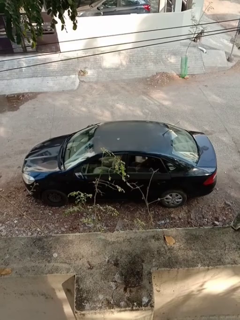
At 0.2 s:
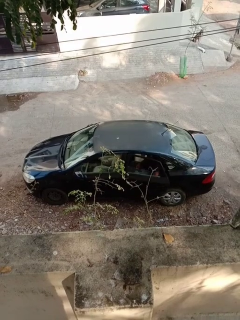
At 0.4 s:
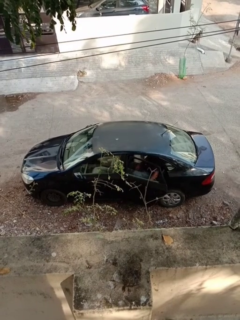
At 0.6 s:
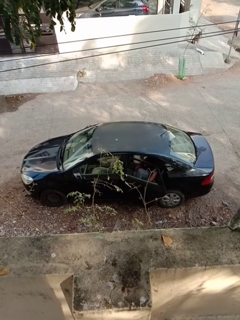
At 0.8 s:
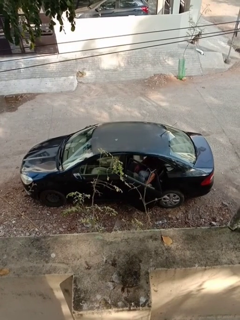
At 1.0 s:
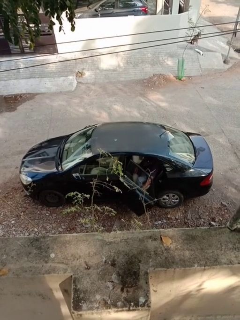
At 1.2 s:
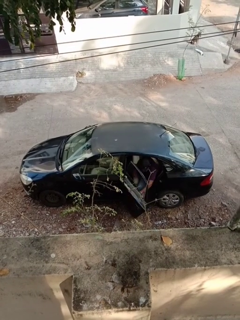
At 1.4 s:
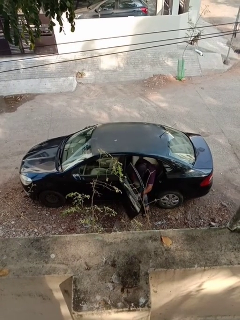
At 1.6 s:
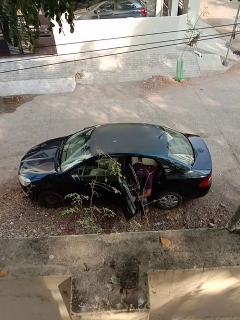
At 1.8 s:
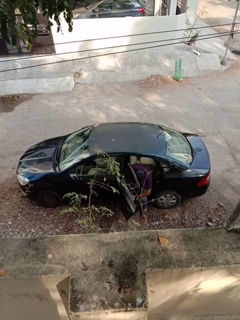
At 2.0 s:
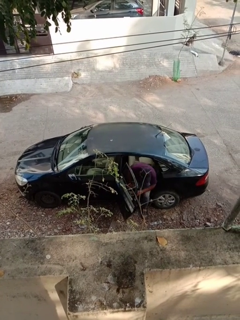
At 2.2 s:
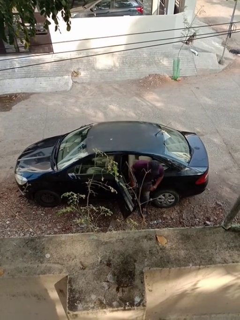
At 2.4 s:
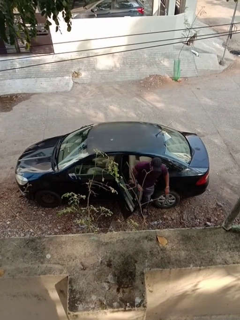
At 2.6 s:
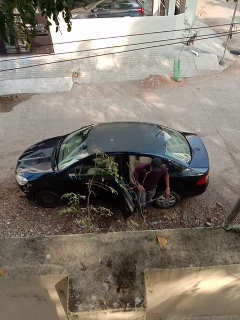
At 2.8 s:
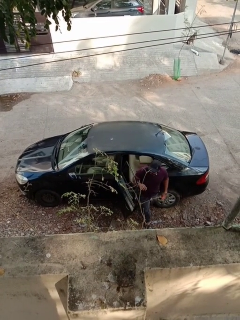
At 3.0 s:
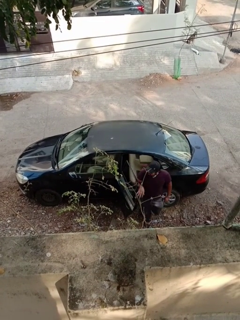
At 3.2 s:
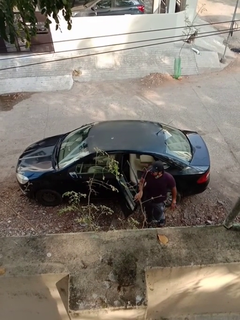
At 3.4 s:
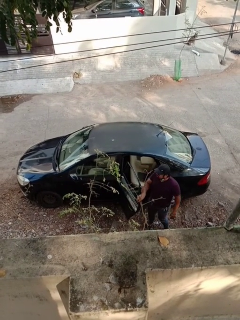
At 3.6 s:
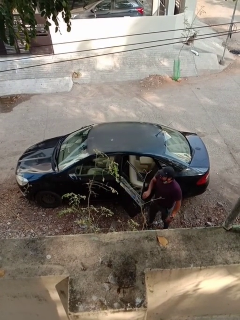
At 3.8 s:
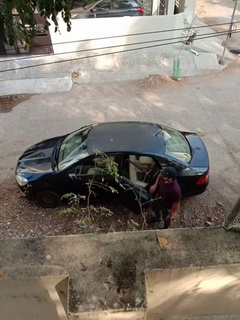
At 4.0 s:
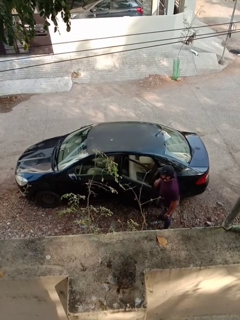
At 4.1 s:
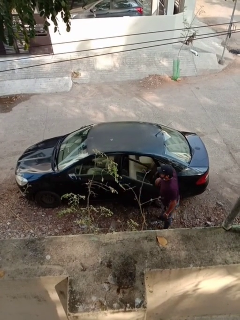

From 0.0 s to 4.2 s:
car drops off person

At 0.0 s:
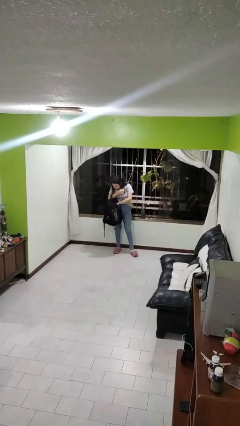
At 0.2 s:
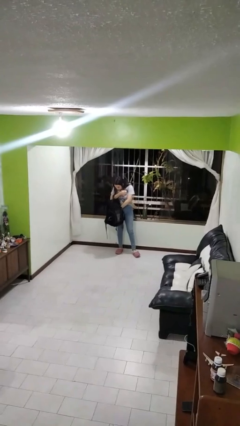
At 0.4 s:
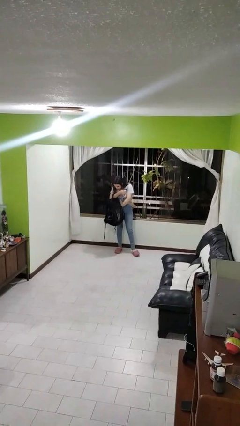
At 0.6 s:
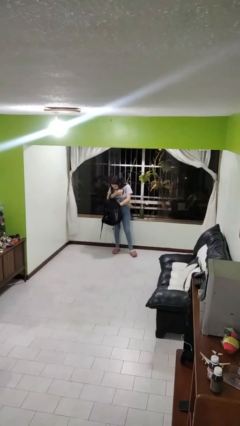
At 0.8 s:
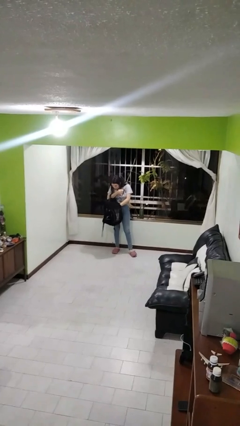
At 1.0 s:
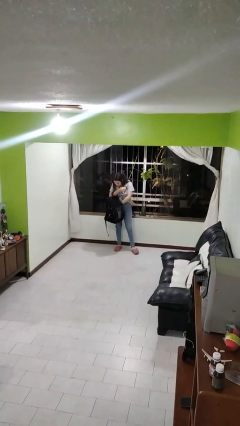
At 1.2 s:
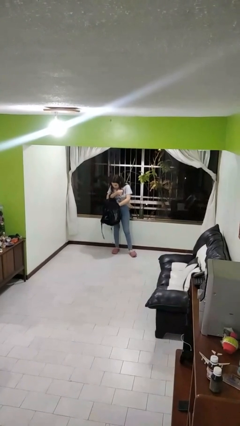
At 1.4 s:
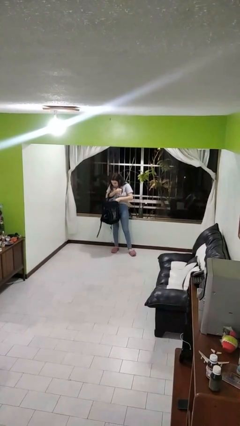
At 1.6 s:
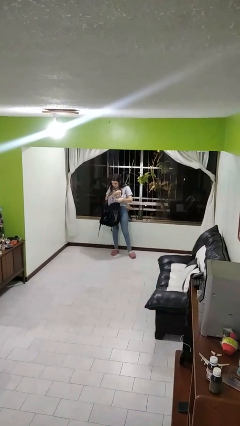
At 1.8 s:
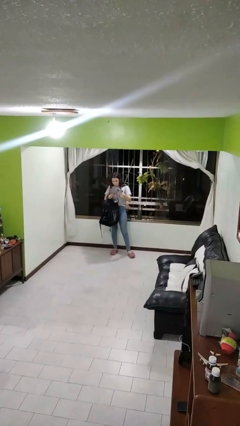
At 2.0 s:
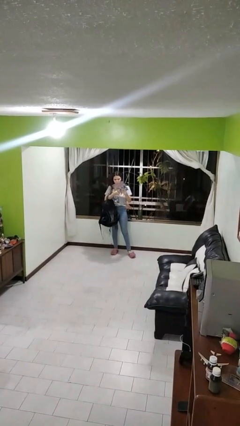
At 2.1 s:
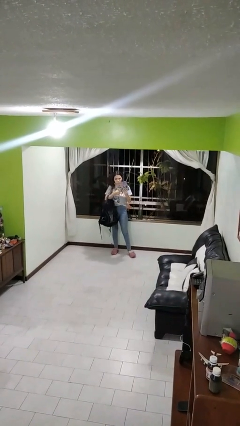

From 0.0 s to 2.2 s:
person searches in backpack

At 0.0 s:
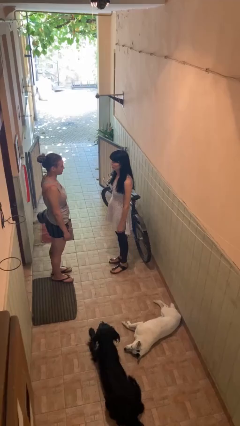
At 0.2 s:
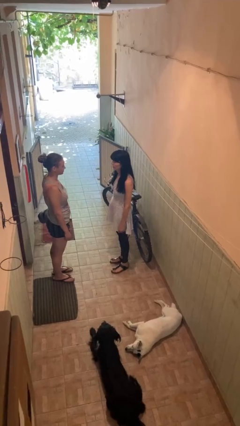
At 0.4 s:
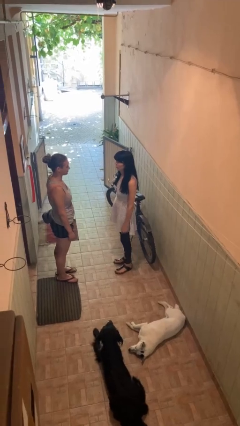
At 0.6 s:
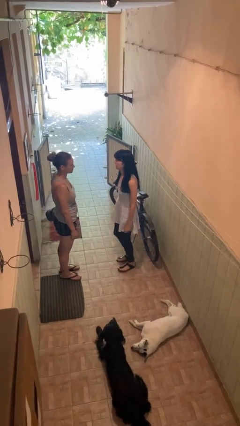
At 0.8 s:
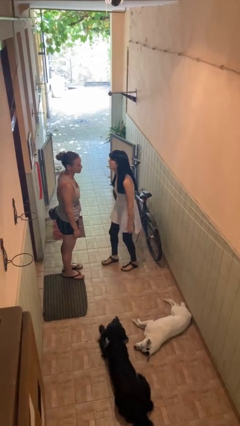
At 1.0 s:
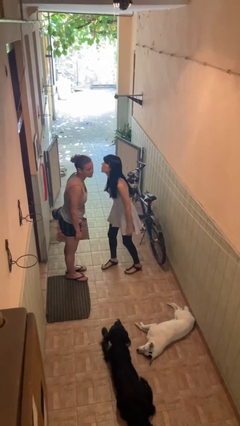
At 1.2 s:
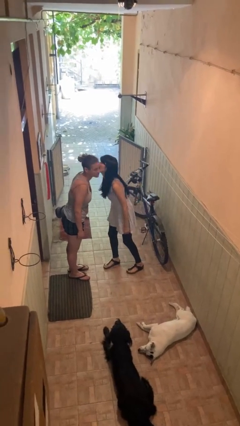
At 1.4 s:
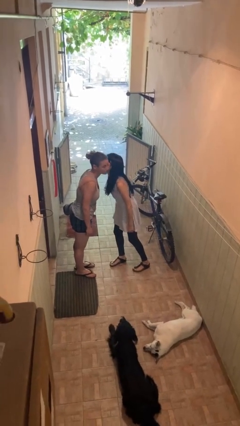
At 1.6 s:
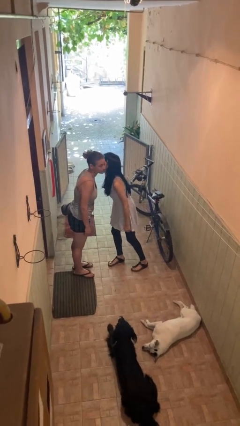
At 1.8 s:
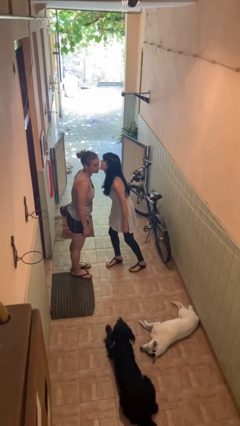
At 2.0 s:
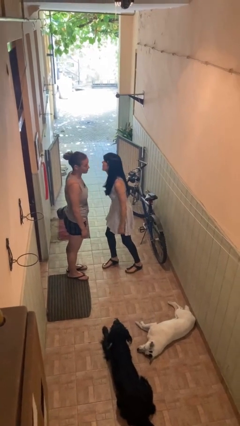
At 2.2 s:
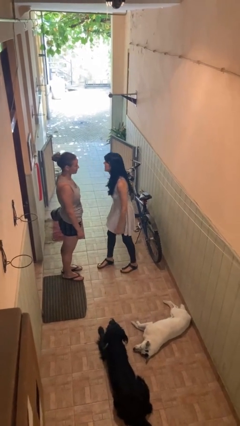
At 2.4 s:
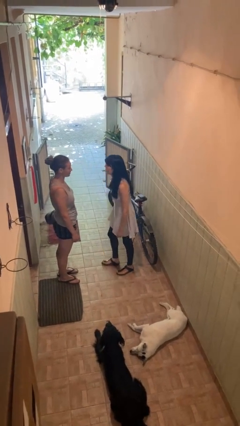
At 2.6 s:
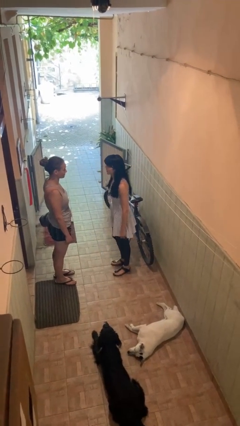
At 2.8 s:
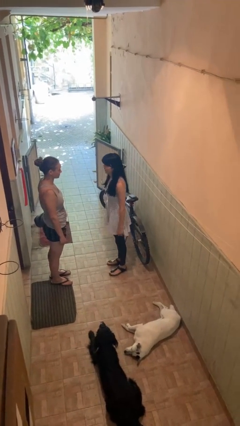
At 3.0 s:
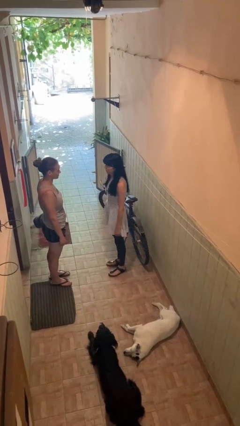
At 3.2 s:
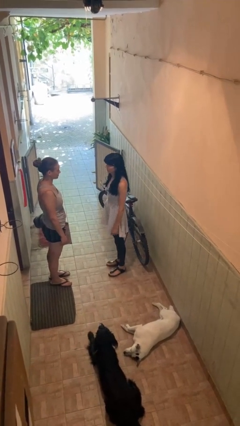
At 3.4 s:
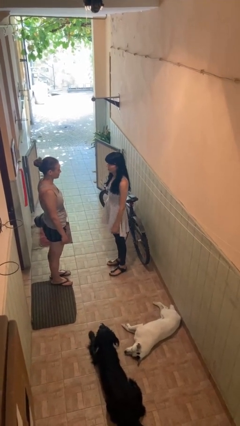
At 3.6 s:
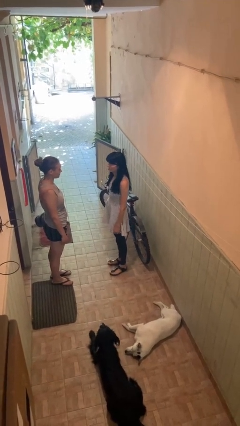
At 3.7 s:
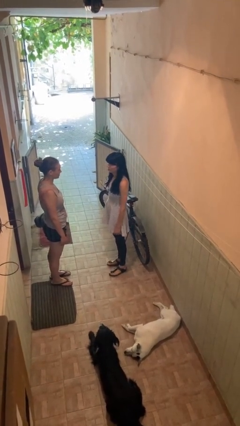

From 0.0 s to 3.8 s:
person kisses cheek of person

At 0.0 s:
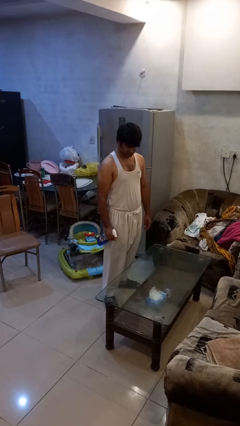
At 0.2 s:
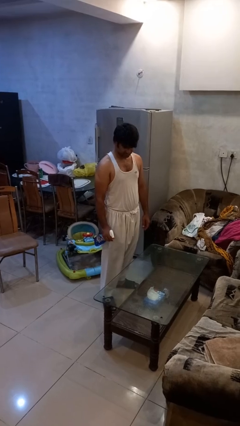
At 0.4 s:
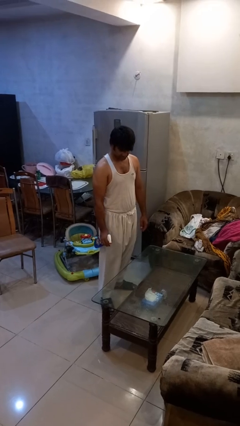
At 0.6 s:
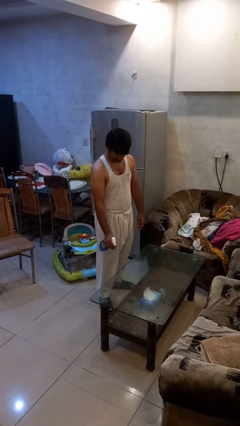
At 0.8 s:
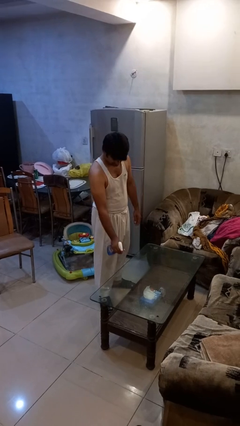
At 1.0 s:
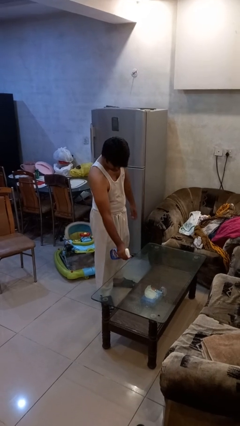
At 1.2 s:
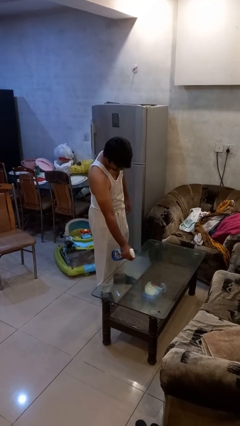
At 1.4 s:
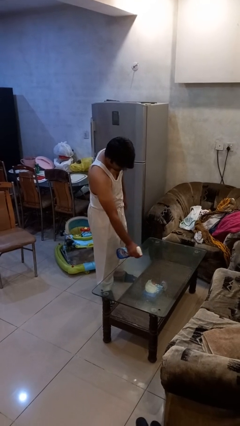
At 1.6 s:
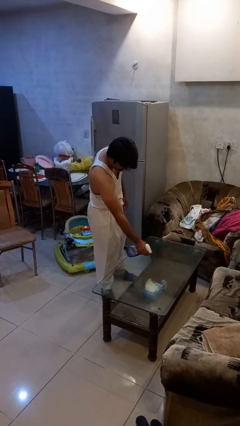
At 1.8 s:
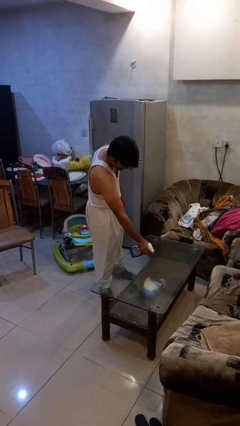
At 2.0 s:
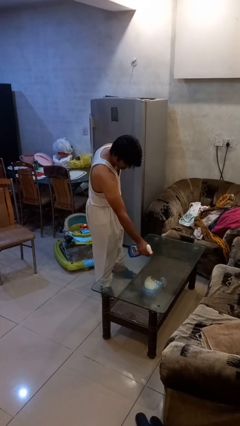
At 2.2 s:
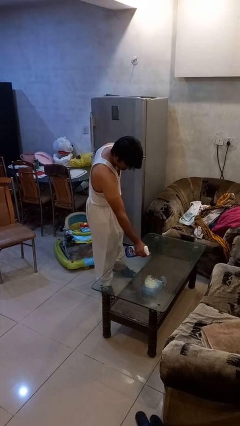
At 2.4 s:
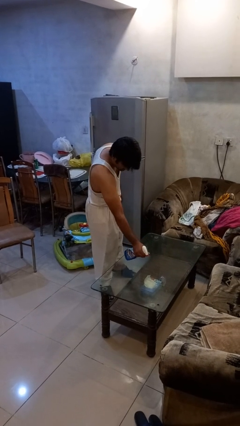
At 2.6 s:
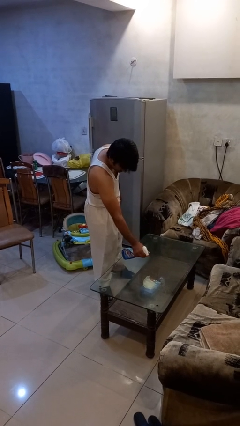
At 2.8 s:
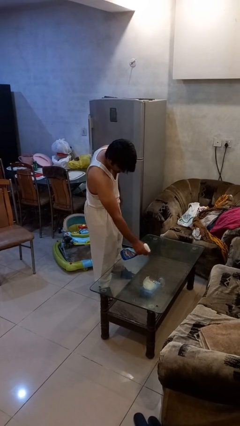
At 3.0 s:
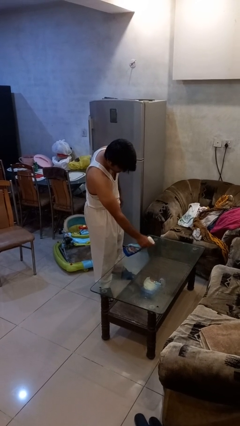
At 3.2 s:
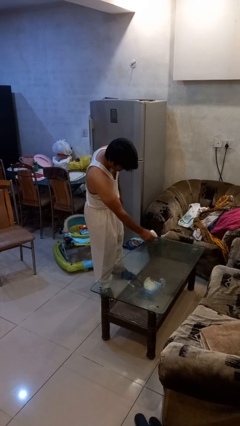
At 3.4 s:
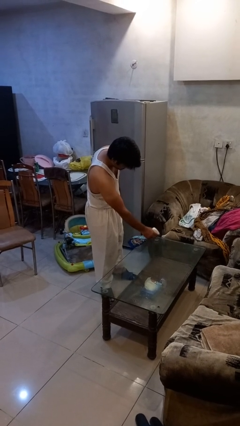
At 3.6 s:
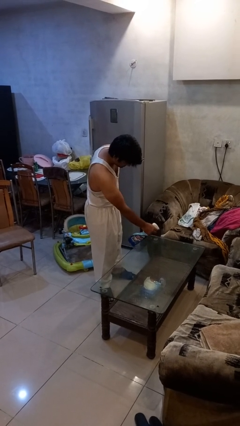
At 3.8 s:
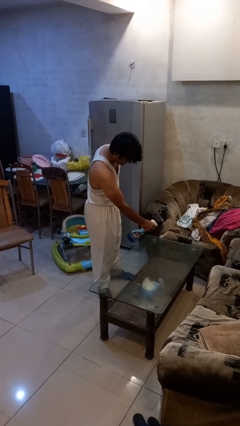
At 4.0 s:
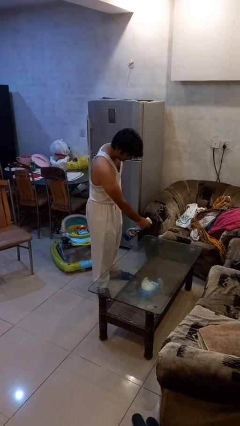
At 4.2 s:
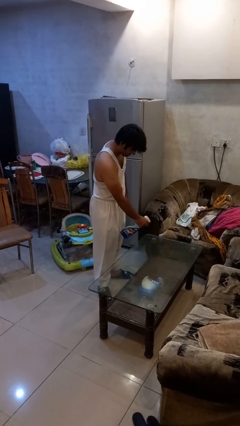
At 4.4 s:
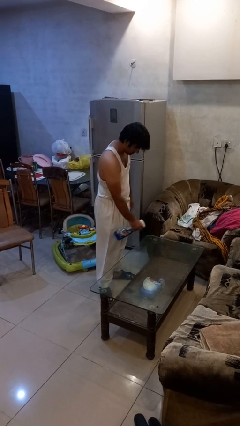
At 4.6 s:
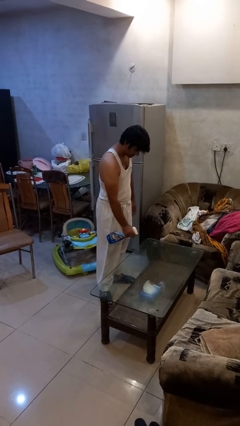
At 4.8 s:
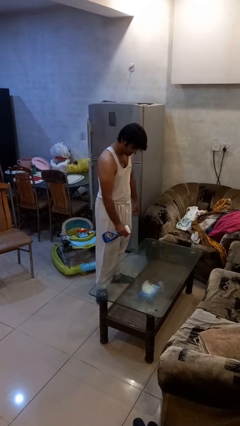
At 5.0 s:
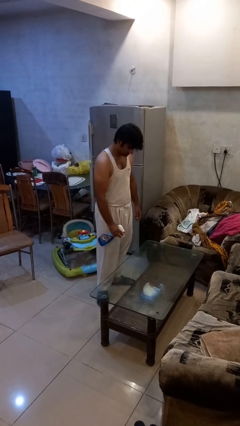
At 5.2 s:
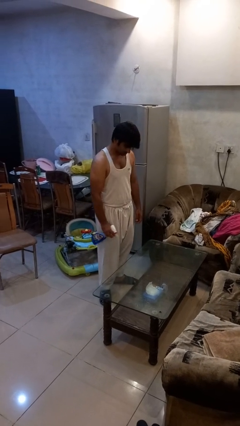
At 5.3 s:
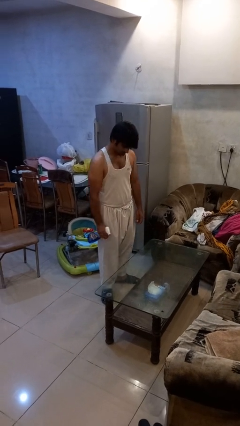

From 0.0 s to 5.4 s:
person sprays from bottle

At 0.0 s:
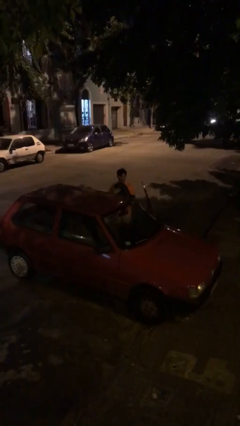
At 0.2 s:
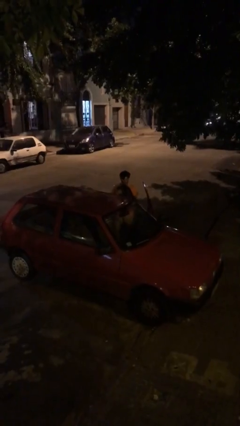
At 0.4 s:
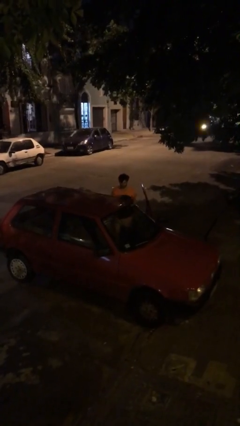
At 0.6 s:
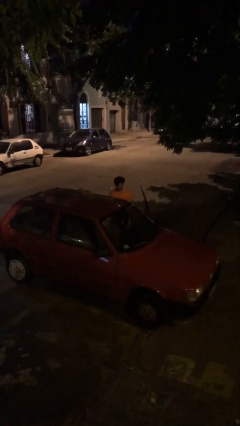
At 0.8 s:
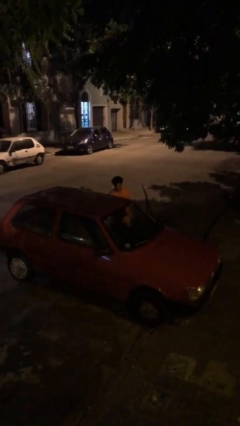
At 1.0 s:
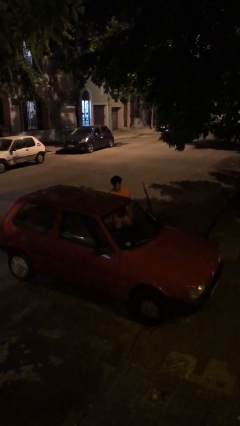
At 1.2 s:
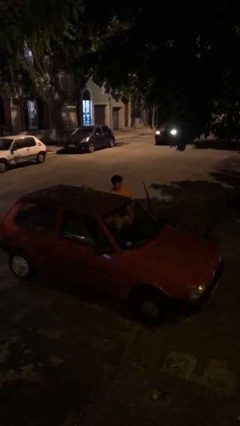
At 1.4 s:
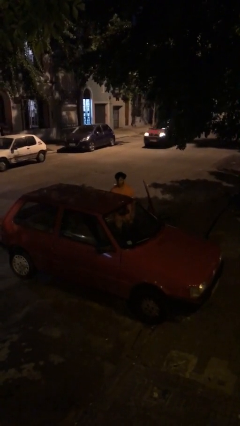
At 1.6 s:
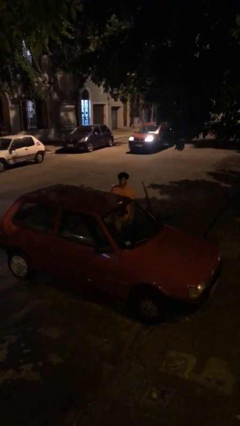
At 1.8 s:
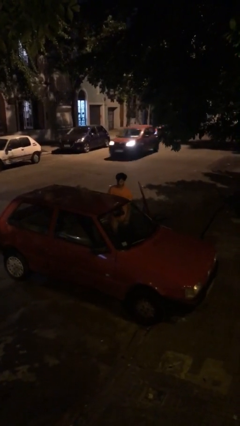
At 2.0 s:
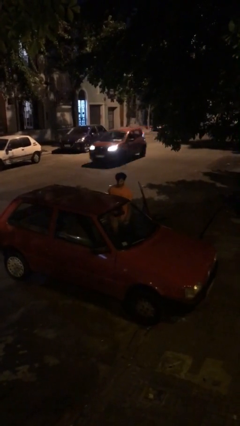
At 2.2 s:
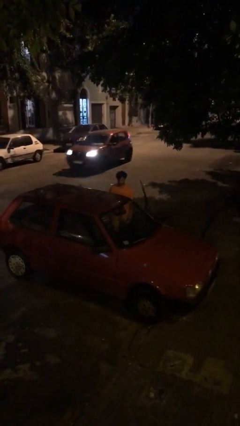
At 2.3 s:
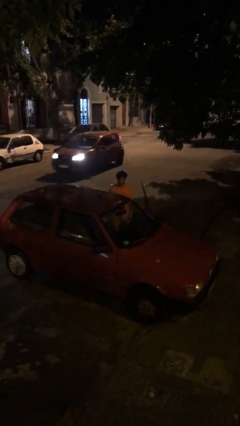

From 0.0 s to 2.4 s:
person loads car

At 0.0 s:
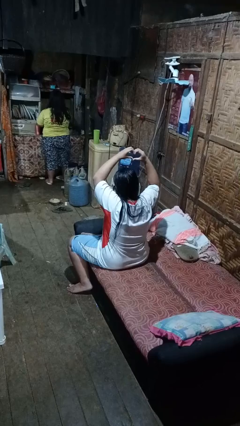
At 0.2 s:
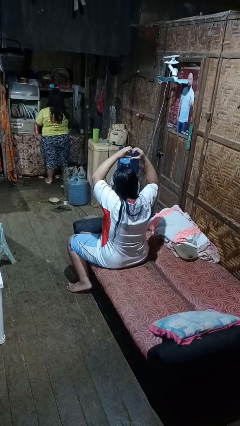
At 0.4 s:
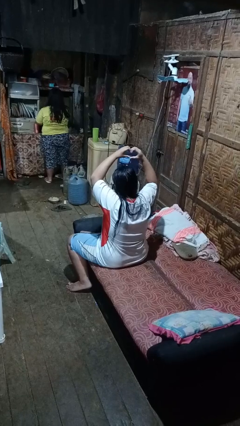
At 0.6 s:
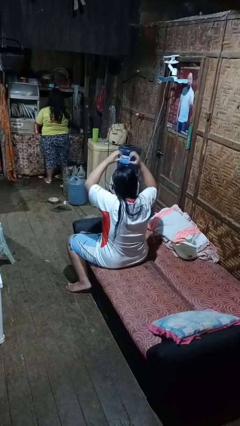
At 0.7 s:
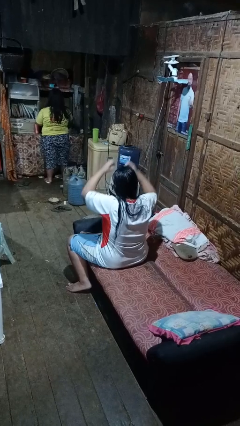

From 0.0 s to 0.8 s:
person gestures heart
